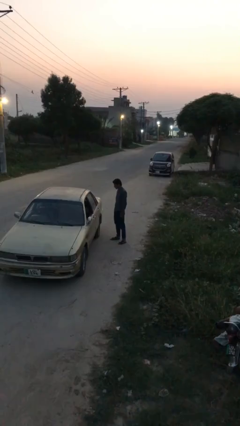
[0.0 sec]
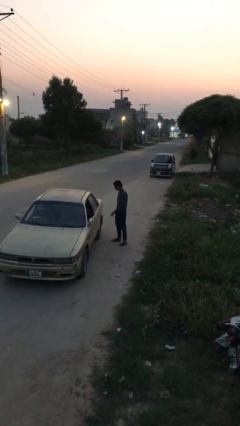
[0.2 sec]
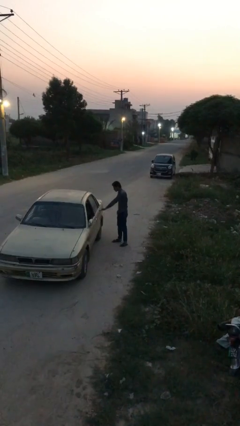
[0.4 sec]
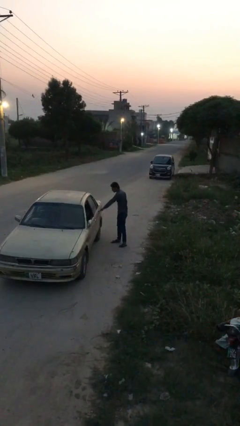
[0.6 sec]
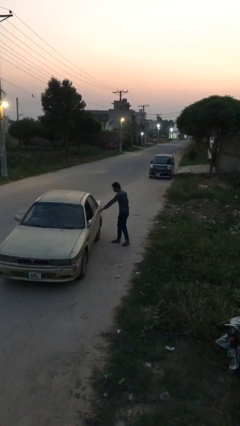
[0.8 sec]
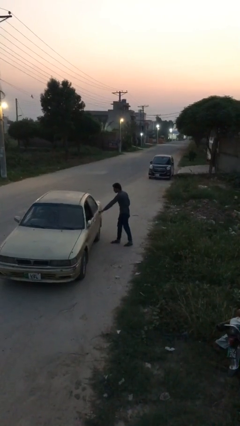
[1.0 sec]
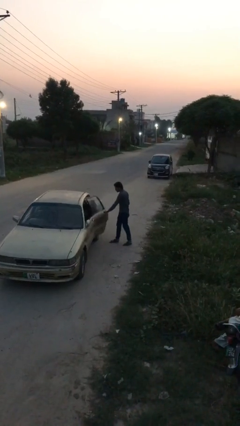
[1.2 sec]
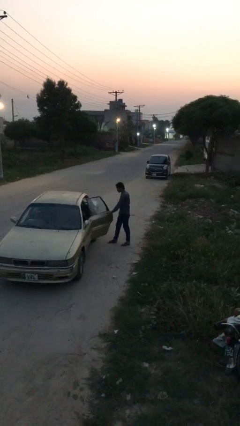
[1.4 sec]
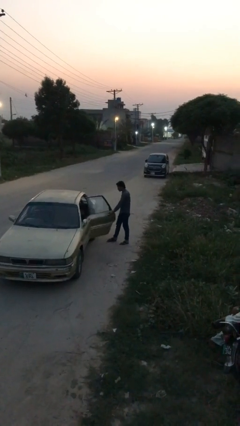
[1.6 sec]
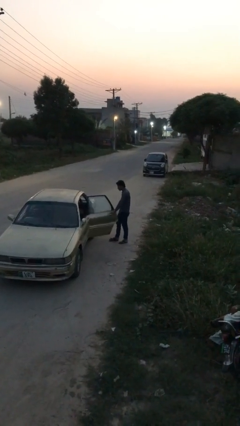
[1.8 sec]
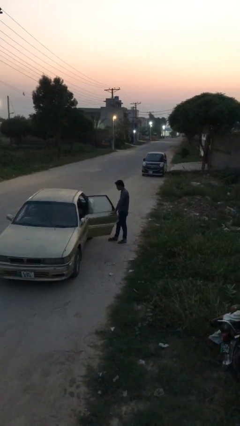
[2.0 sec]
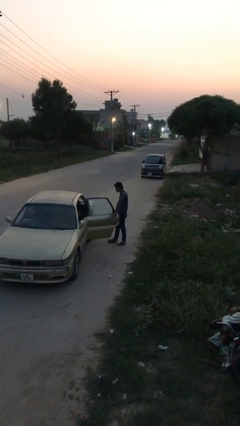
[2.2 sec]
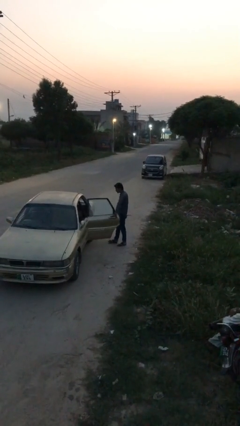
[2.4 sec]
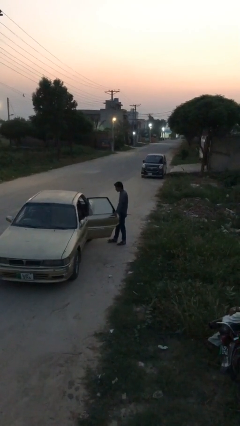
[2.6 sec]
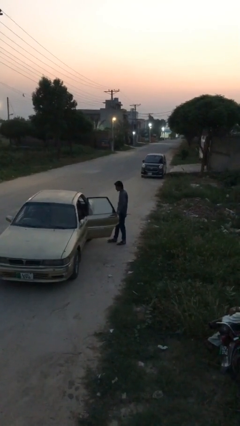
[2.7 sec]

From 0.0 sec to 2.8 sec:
person opens car door

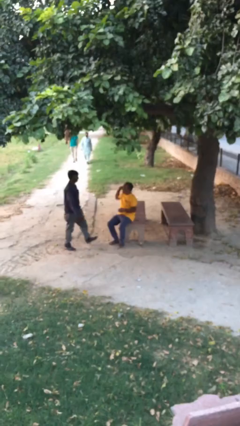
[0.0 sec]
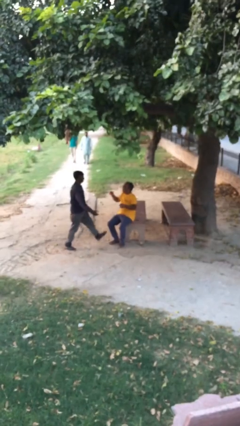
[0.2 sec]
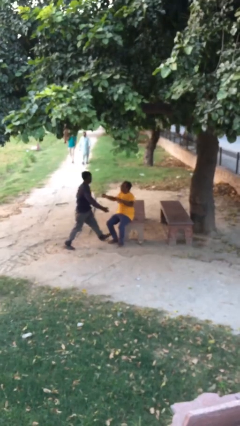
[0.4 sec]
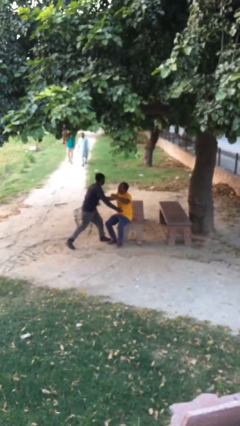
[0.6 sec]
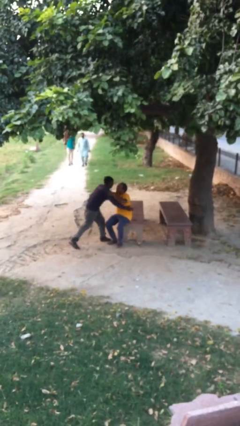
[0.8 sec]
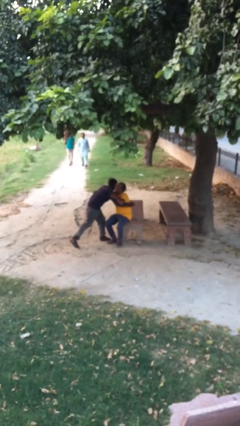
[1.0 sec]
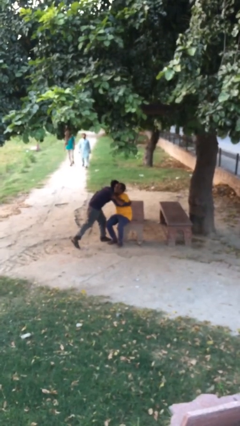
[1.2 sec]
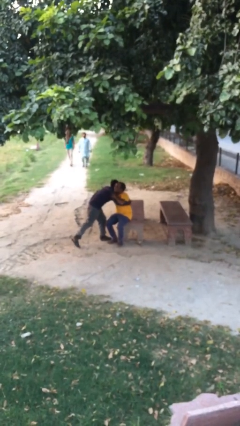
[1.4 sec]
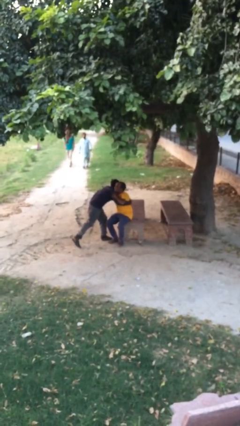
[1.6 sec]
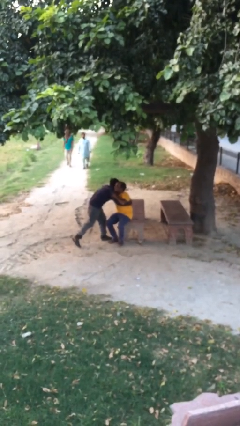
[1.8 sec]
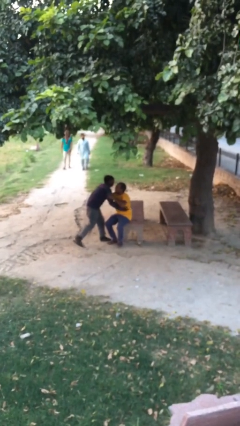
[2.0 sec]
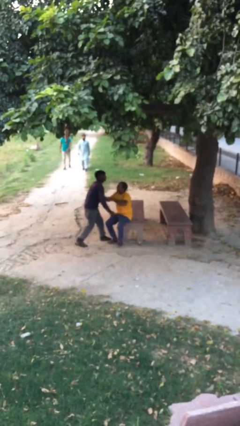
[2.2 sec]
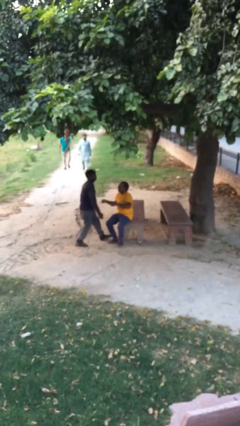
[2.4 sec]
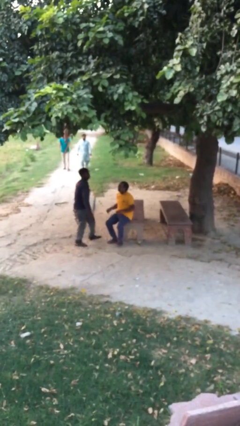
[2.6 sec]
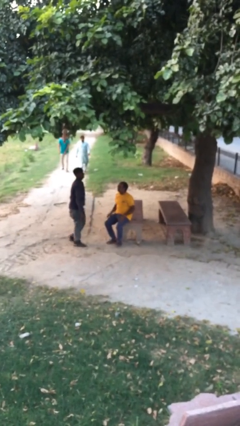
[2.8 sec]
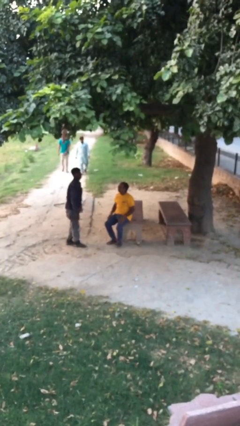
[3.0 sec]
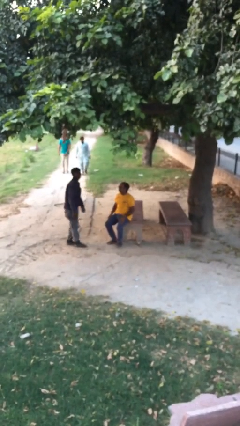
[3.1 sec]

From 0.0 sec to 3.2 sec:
person embraces person

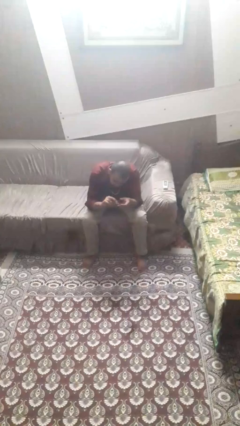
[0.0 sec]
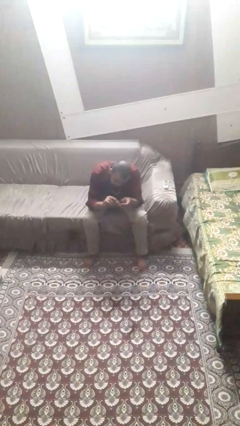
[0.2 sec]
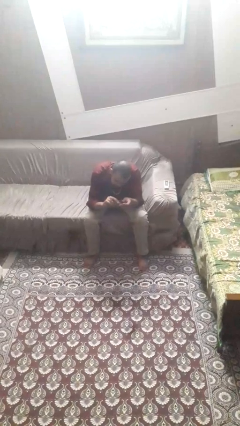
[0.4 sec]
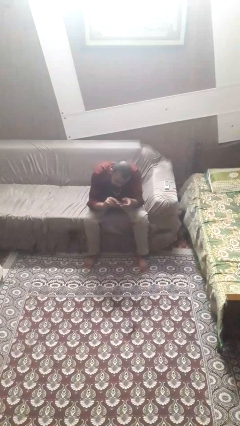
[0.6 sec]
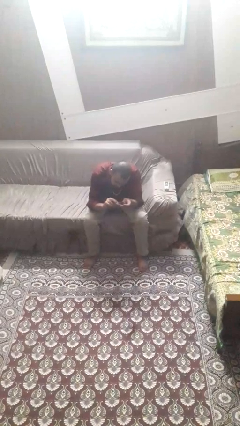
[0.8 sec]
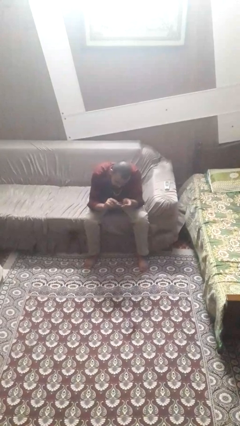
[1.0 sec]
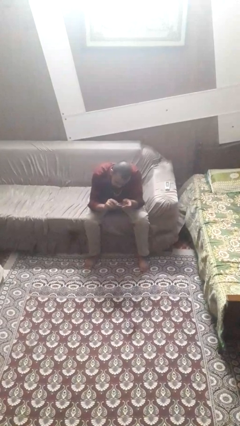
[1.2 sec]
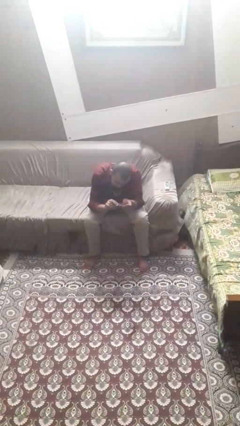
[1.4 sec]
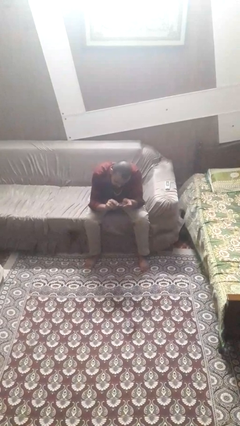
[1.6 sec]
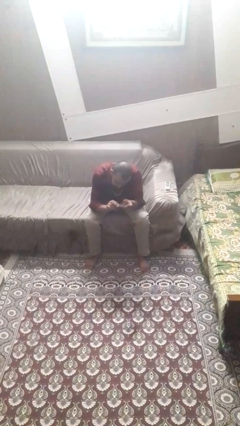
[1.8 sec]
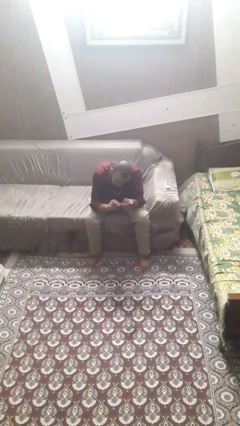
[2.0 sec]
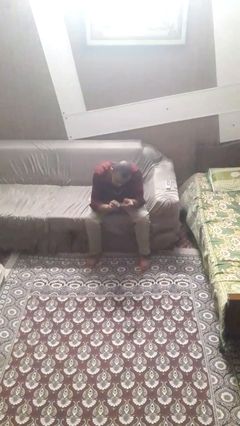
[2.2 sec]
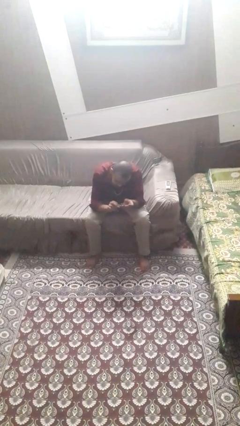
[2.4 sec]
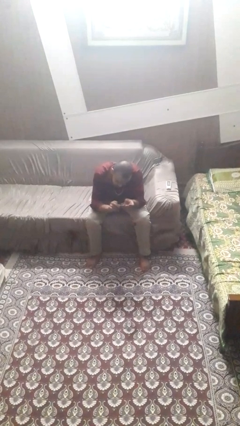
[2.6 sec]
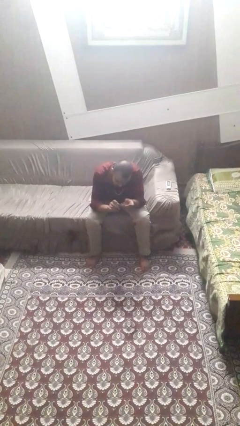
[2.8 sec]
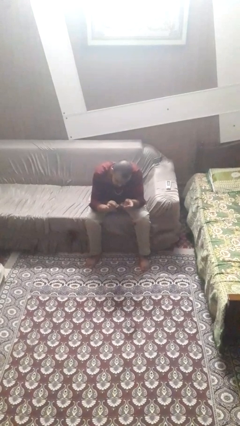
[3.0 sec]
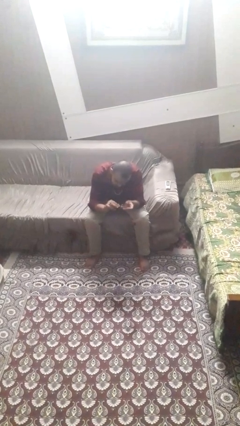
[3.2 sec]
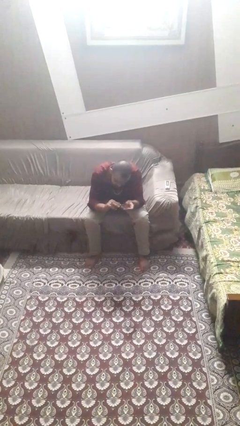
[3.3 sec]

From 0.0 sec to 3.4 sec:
person clips fingernails

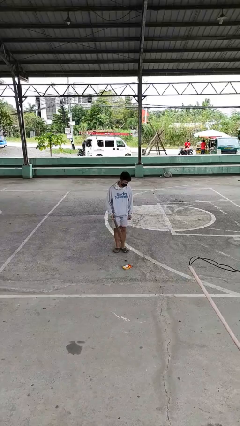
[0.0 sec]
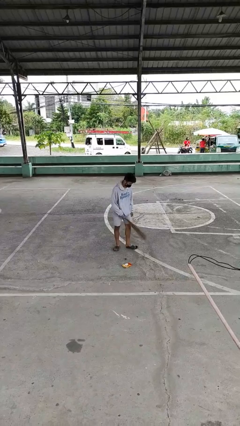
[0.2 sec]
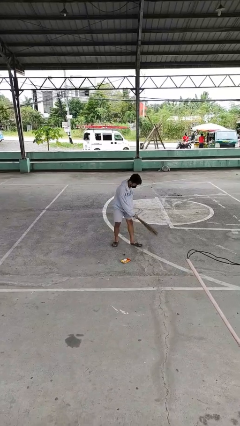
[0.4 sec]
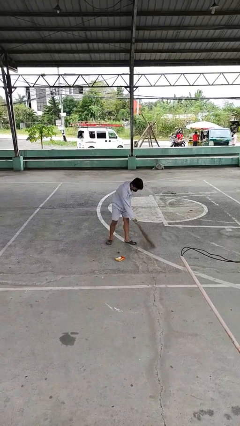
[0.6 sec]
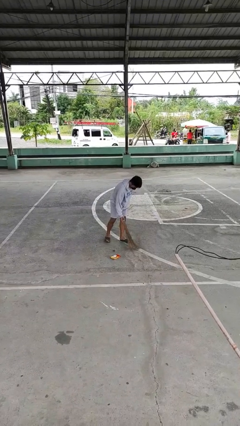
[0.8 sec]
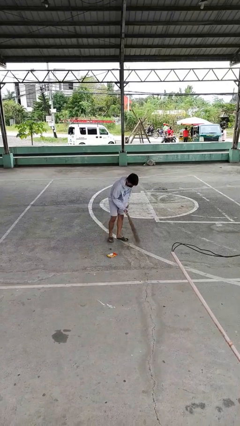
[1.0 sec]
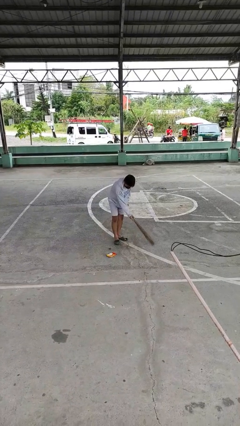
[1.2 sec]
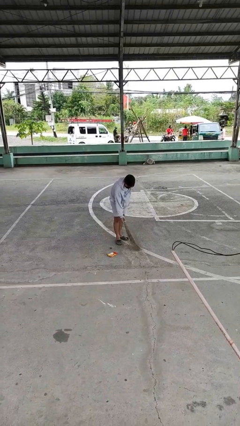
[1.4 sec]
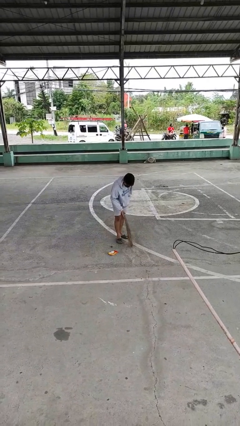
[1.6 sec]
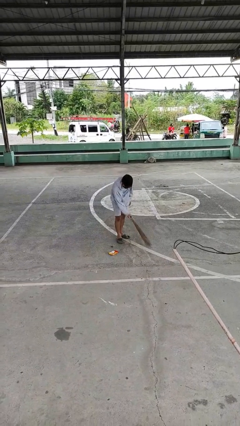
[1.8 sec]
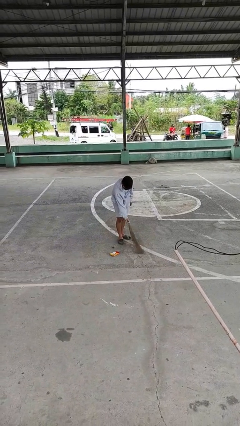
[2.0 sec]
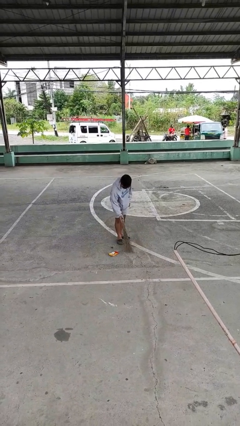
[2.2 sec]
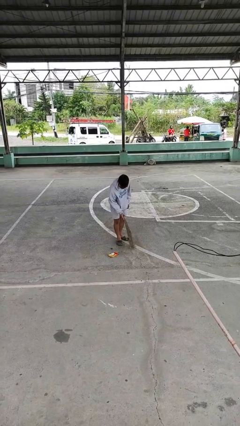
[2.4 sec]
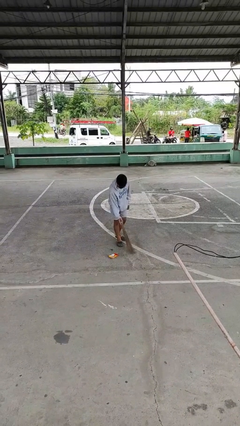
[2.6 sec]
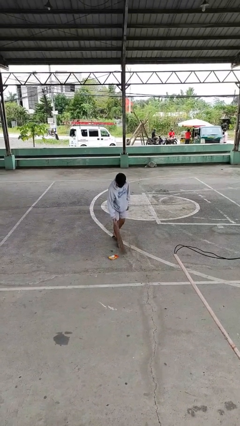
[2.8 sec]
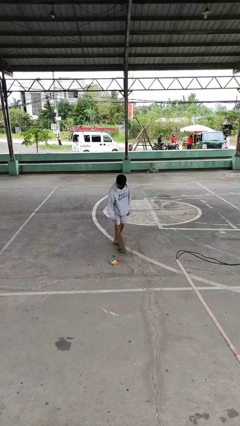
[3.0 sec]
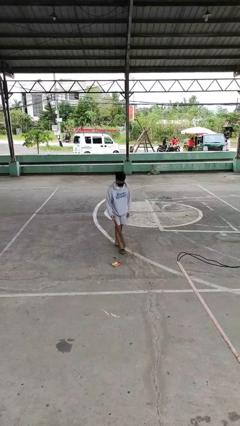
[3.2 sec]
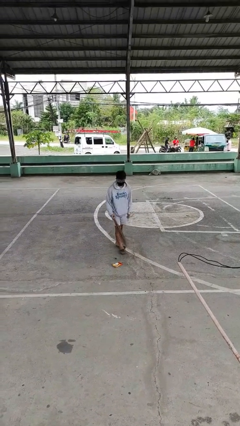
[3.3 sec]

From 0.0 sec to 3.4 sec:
person sweeps floor

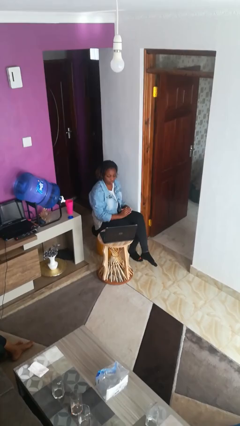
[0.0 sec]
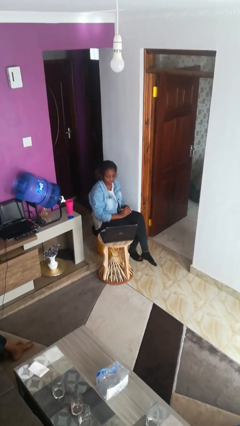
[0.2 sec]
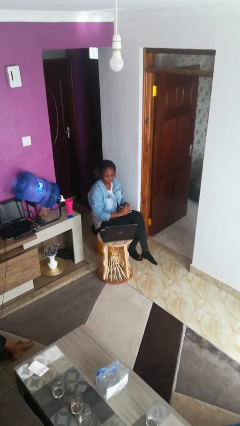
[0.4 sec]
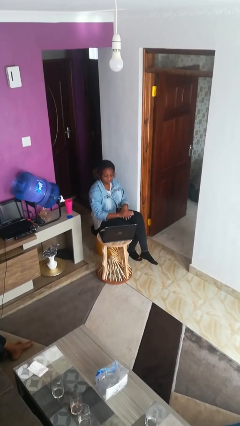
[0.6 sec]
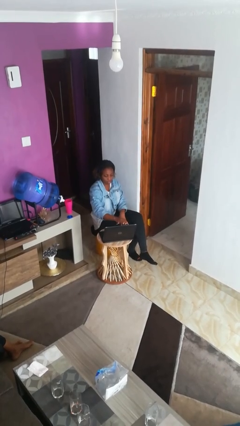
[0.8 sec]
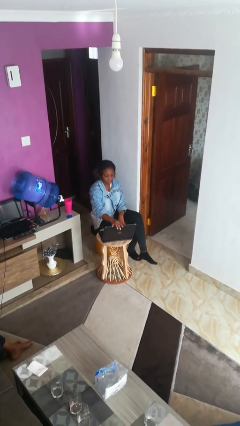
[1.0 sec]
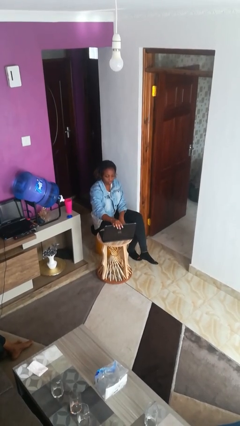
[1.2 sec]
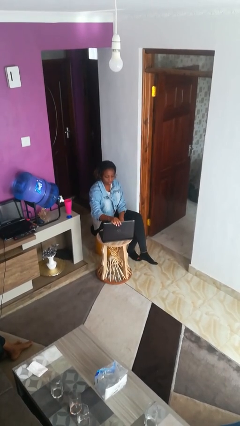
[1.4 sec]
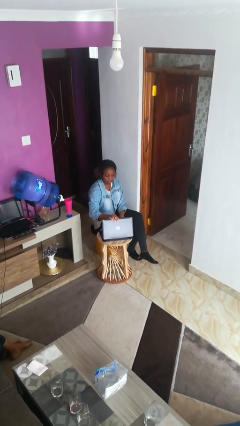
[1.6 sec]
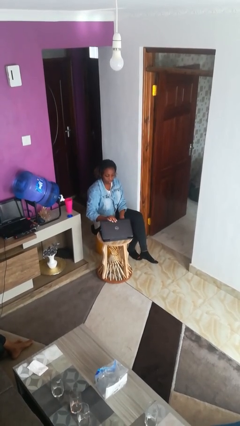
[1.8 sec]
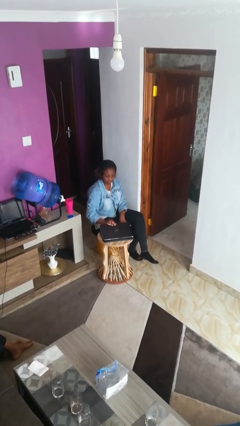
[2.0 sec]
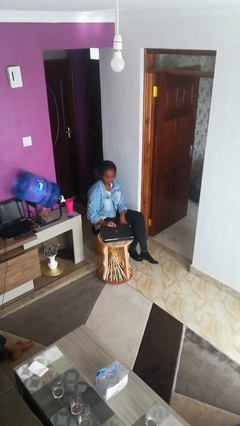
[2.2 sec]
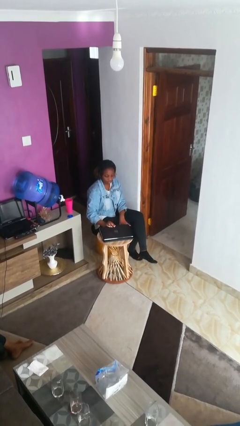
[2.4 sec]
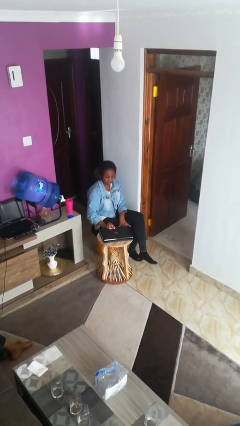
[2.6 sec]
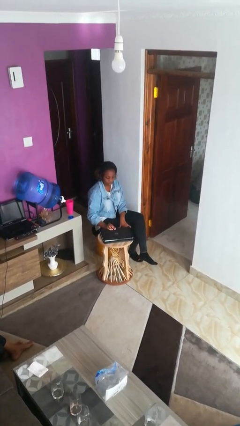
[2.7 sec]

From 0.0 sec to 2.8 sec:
person closes laptop

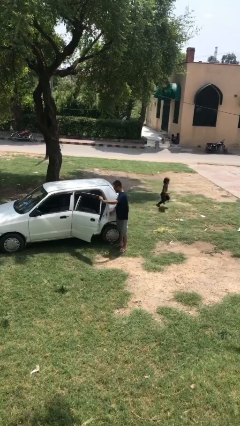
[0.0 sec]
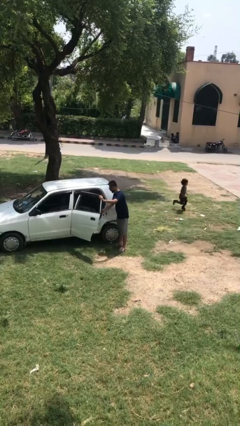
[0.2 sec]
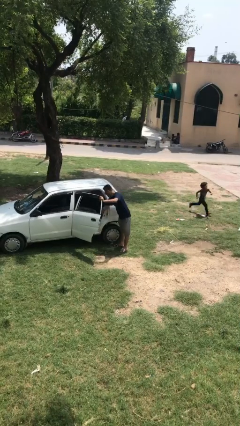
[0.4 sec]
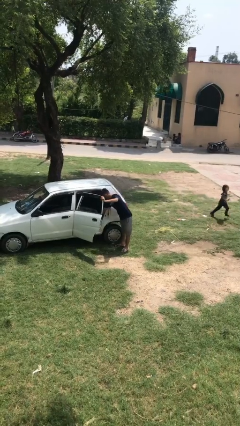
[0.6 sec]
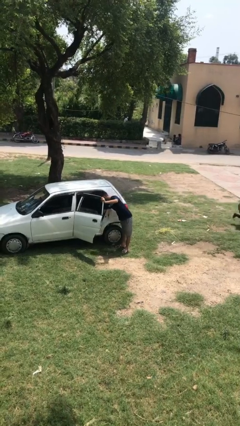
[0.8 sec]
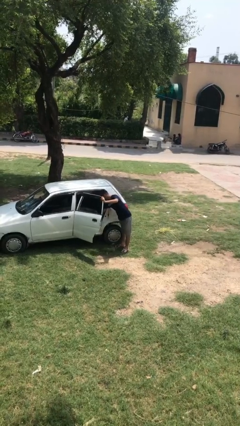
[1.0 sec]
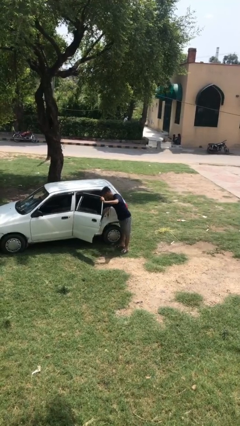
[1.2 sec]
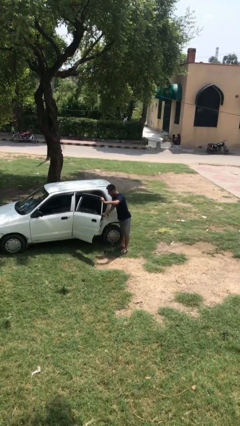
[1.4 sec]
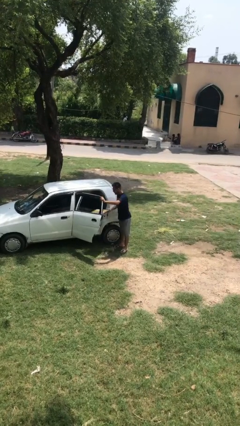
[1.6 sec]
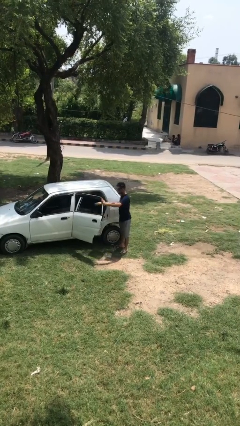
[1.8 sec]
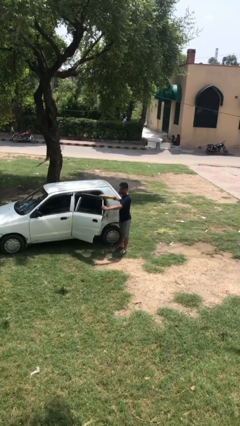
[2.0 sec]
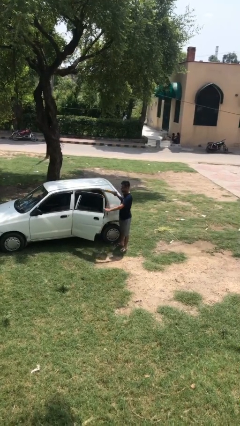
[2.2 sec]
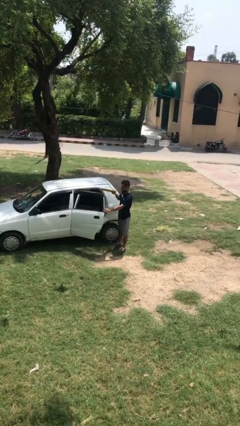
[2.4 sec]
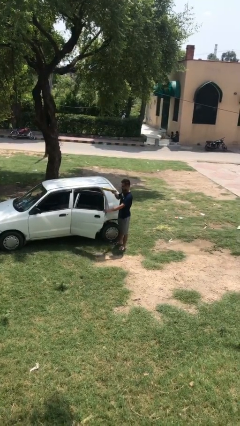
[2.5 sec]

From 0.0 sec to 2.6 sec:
person unloads car
